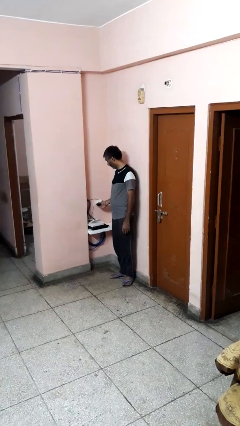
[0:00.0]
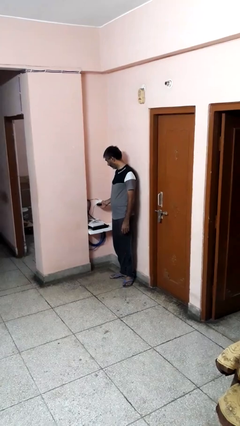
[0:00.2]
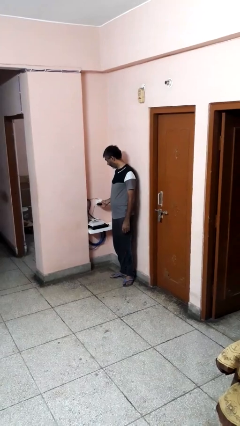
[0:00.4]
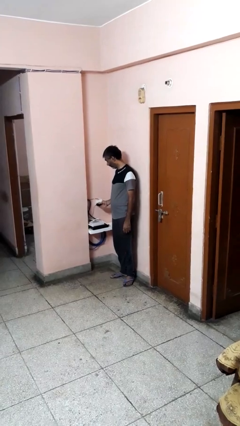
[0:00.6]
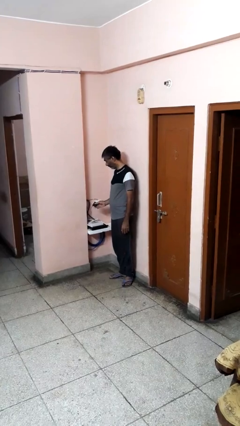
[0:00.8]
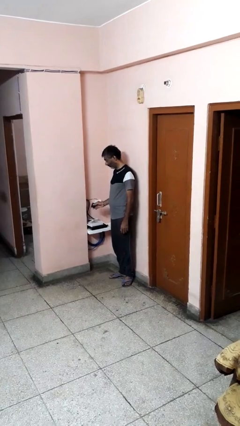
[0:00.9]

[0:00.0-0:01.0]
person unplugs from electrical socket

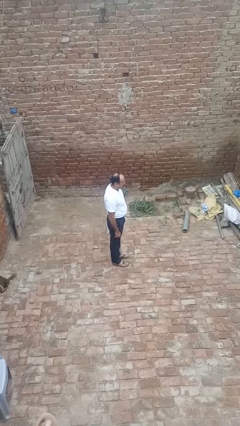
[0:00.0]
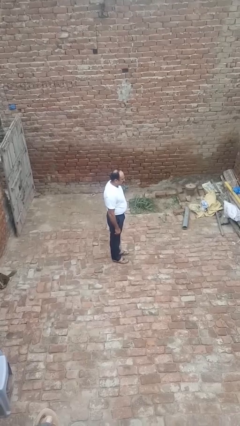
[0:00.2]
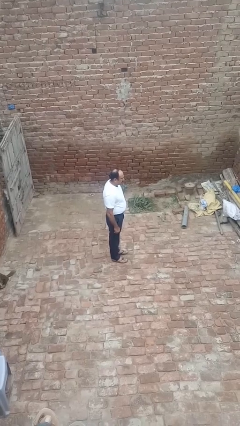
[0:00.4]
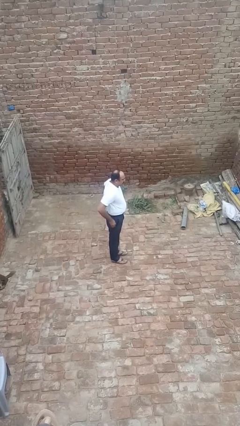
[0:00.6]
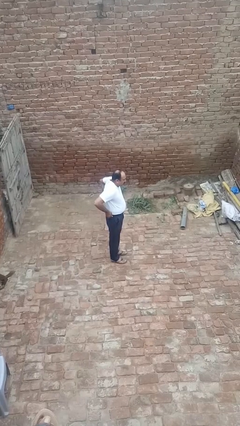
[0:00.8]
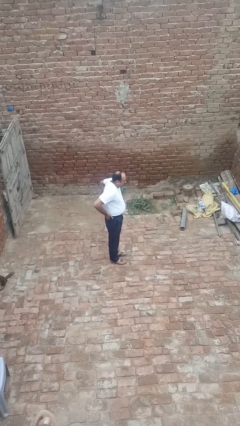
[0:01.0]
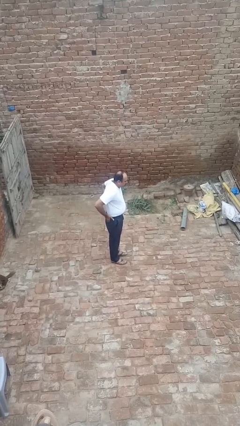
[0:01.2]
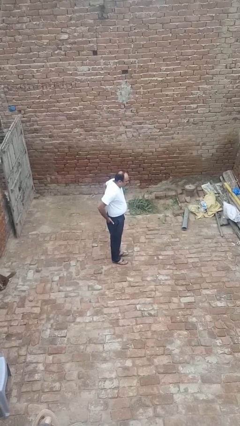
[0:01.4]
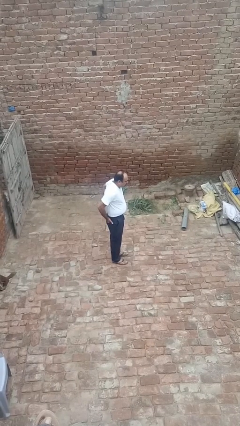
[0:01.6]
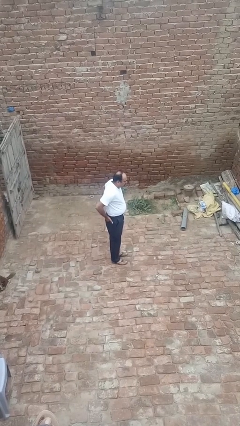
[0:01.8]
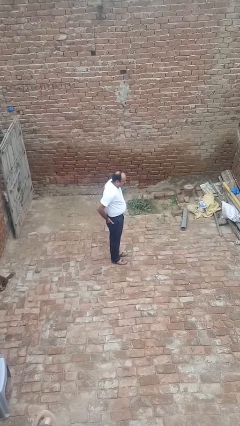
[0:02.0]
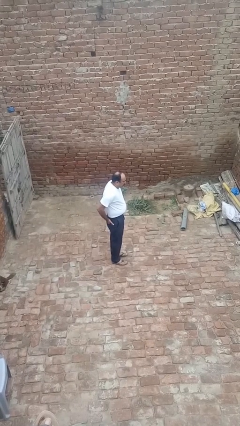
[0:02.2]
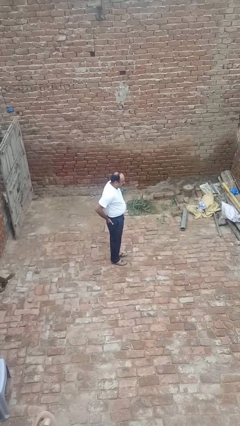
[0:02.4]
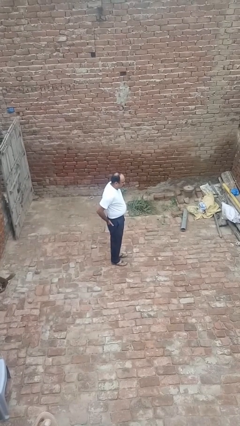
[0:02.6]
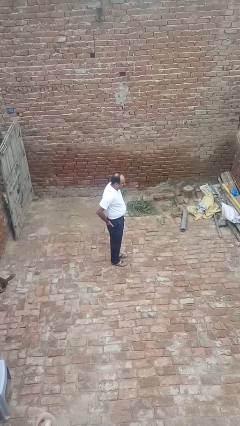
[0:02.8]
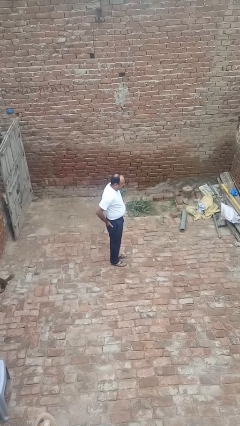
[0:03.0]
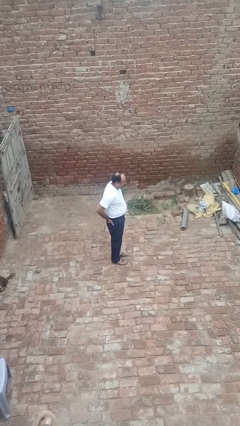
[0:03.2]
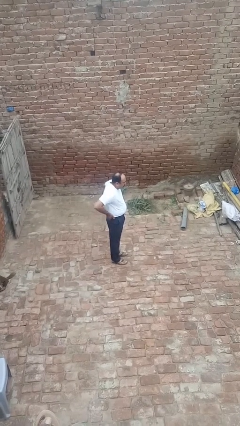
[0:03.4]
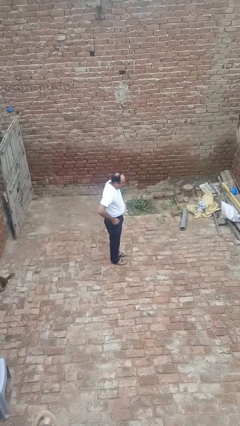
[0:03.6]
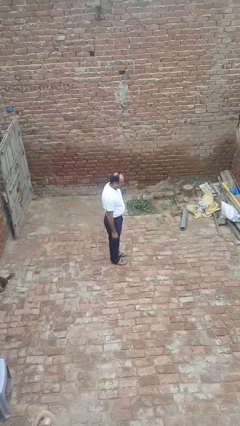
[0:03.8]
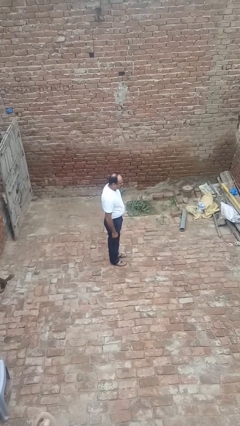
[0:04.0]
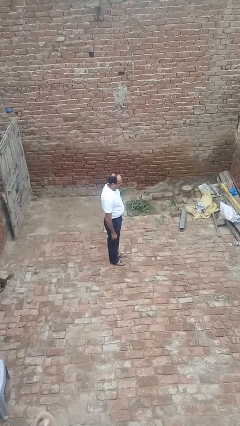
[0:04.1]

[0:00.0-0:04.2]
person puts hands in back pockets

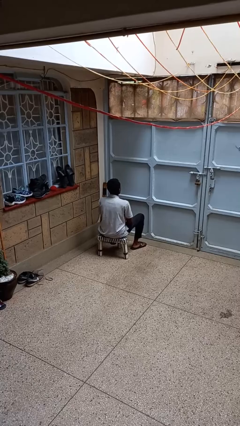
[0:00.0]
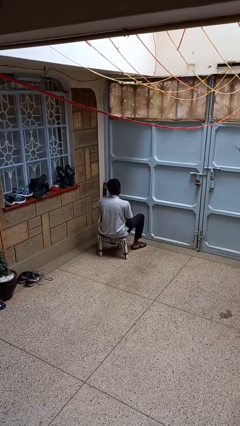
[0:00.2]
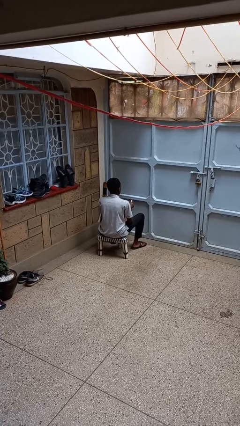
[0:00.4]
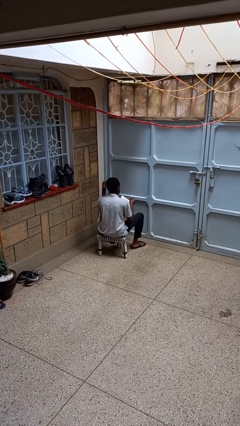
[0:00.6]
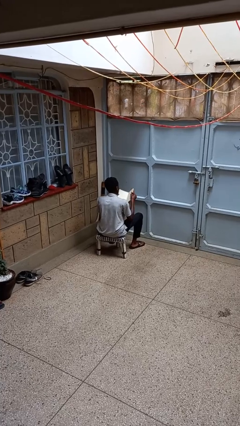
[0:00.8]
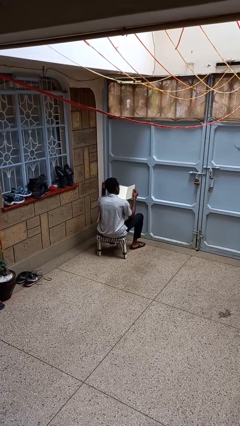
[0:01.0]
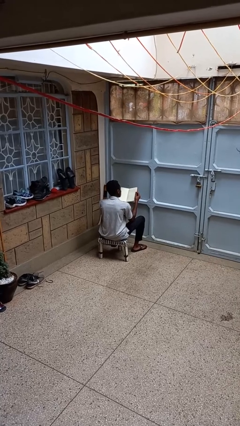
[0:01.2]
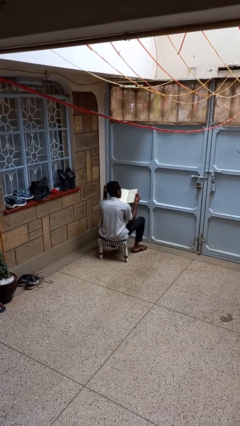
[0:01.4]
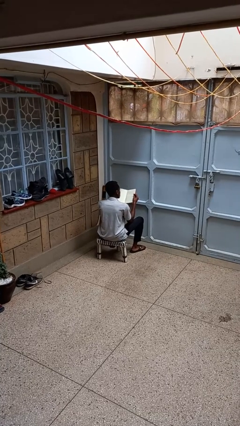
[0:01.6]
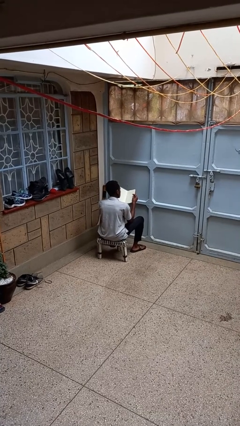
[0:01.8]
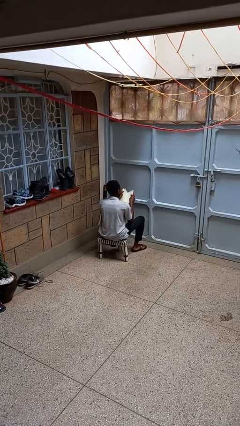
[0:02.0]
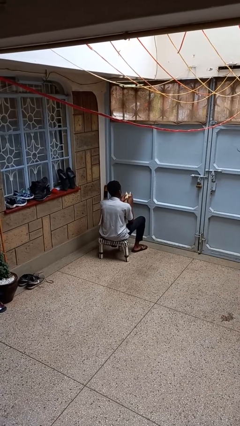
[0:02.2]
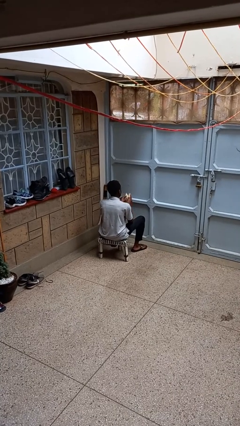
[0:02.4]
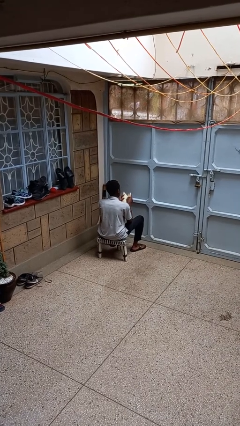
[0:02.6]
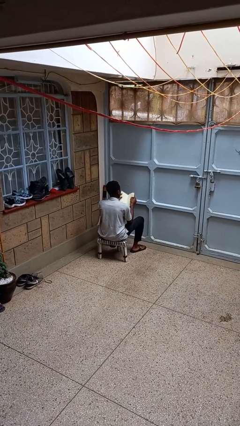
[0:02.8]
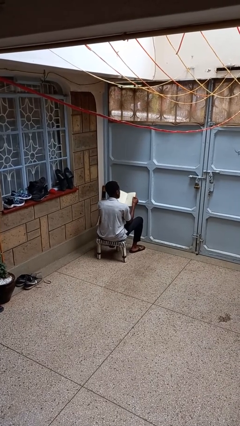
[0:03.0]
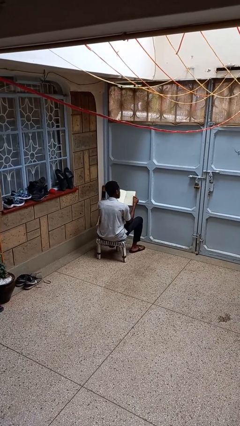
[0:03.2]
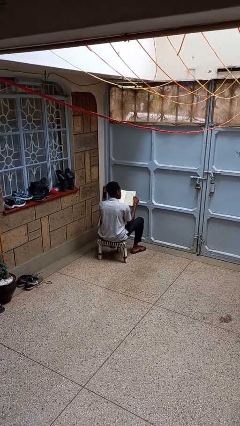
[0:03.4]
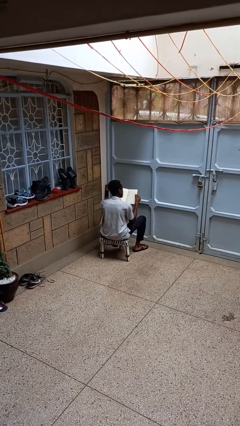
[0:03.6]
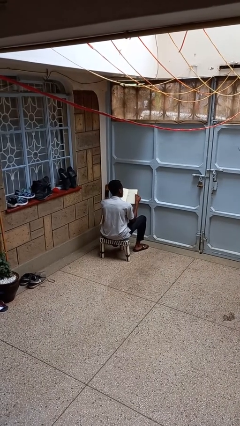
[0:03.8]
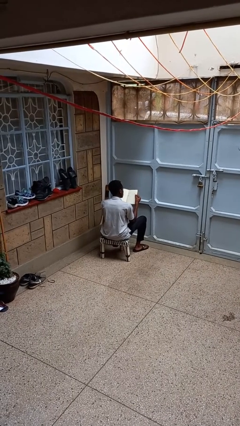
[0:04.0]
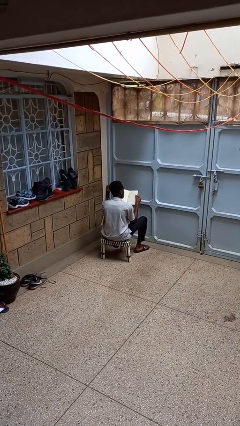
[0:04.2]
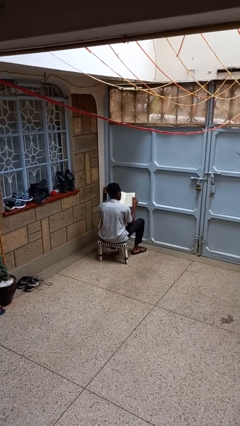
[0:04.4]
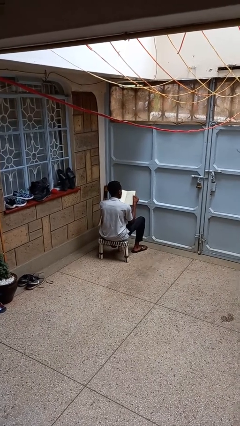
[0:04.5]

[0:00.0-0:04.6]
person reads book

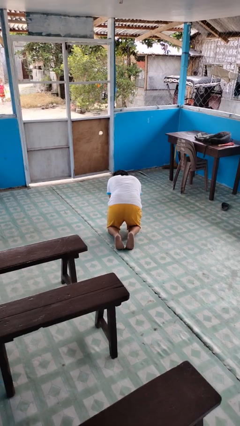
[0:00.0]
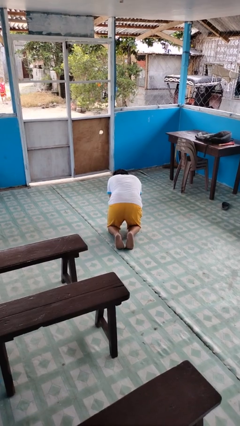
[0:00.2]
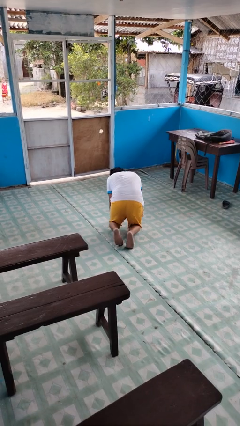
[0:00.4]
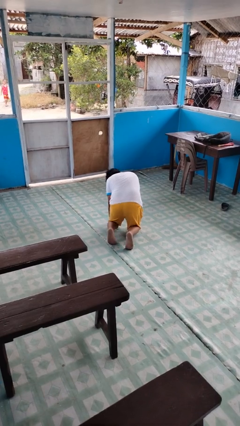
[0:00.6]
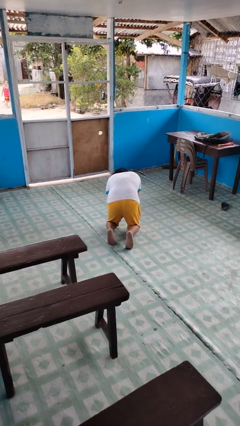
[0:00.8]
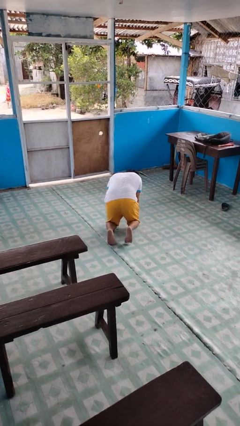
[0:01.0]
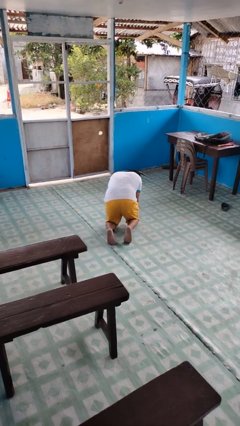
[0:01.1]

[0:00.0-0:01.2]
person crawls

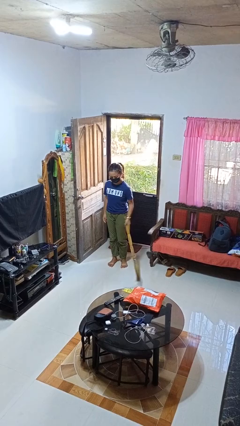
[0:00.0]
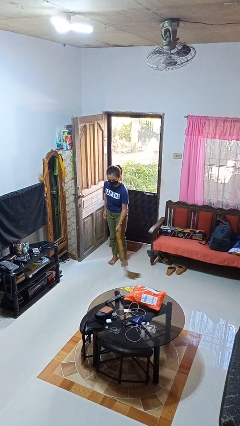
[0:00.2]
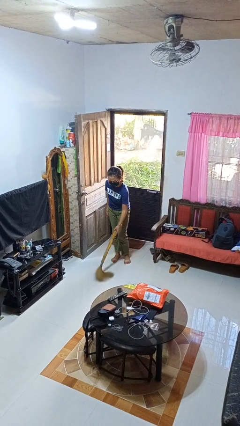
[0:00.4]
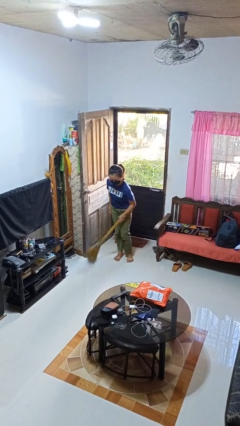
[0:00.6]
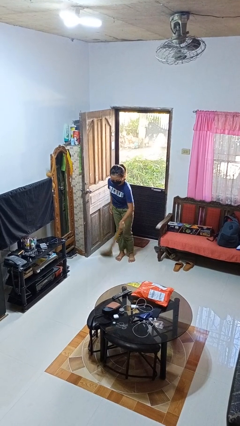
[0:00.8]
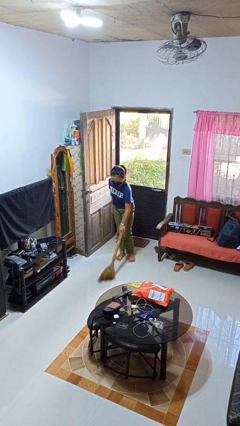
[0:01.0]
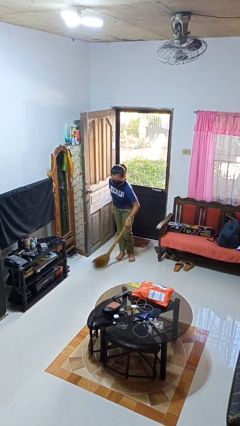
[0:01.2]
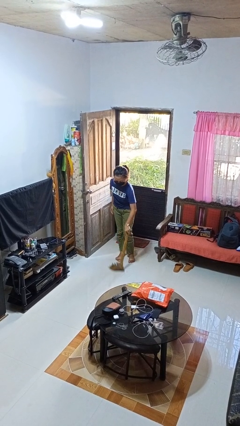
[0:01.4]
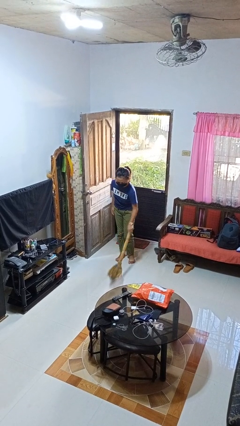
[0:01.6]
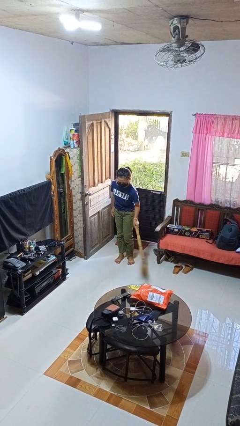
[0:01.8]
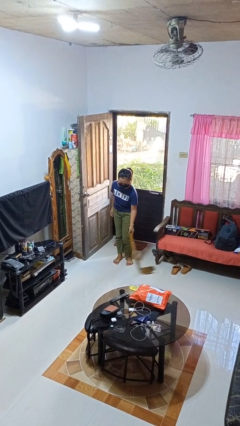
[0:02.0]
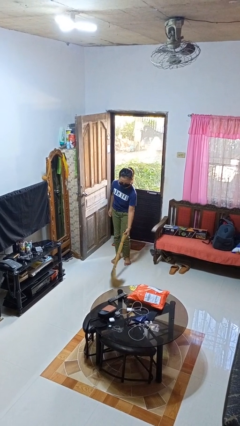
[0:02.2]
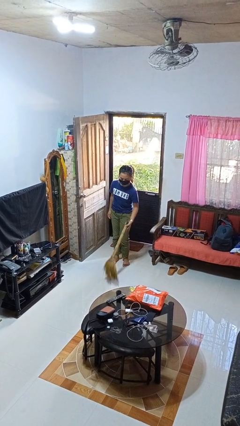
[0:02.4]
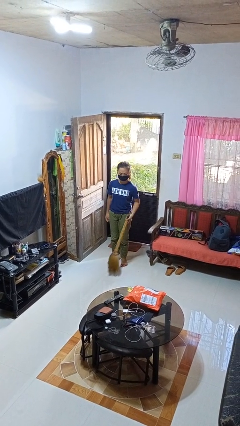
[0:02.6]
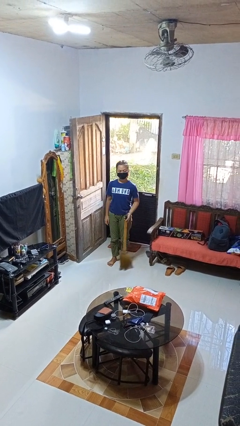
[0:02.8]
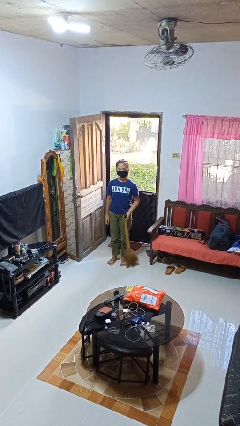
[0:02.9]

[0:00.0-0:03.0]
person sweeps floor

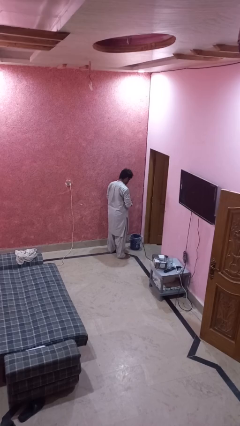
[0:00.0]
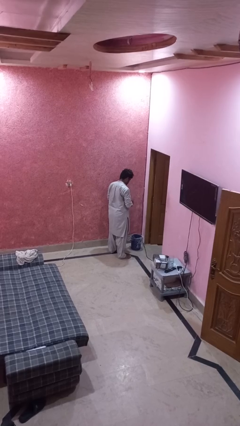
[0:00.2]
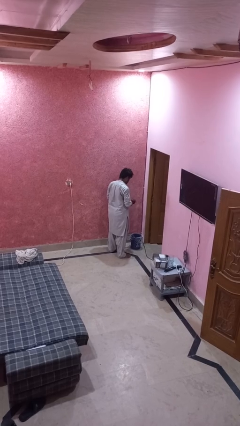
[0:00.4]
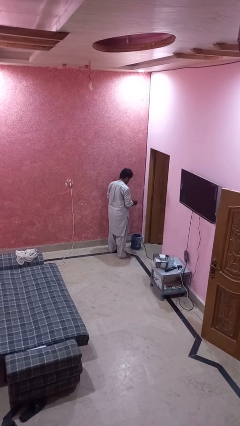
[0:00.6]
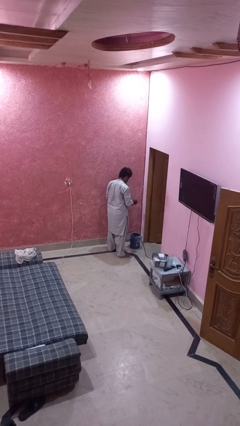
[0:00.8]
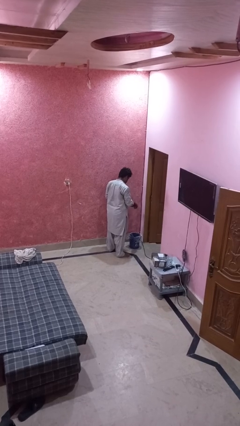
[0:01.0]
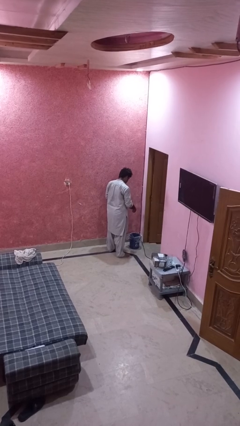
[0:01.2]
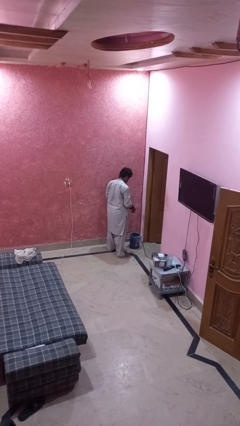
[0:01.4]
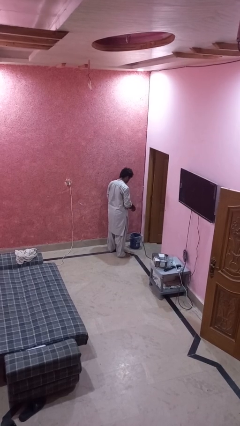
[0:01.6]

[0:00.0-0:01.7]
person discards trash

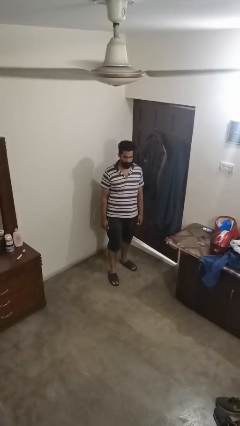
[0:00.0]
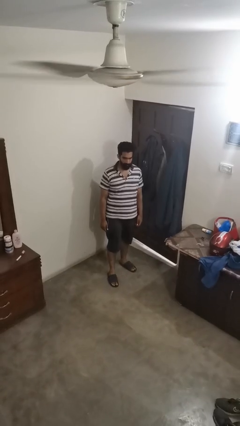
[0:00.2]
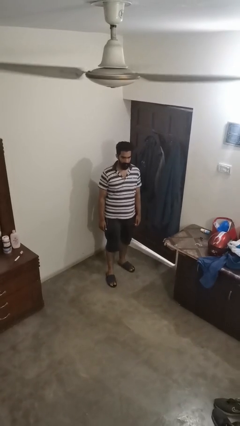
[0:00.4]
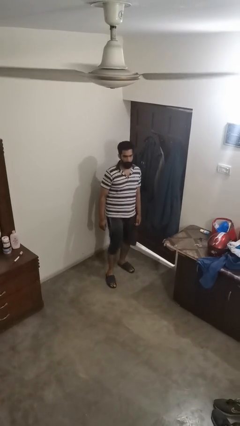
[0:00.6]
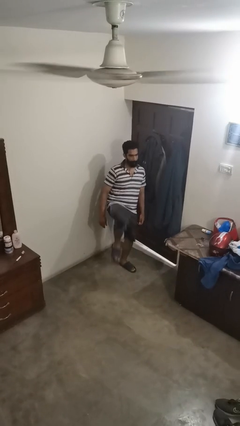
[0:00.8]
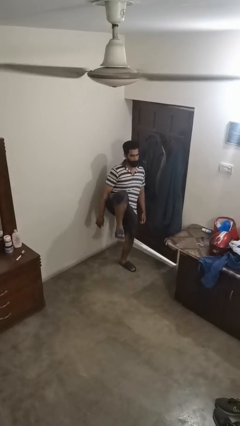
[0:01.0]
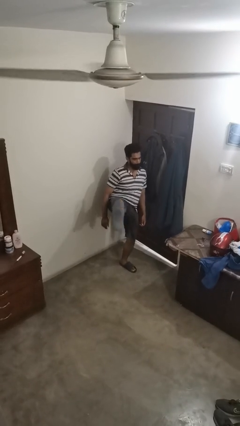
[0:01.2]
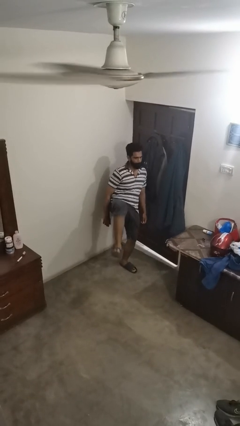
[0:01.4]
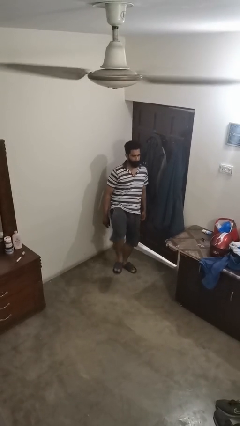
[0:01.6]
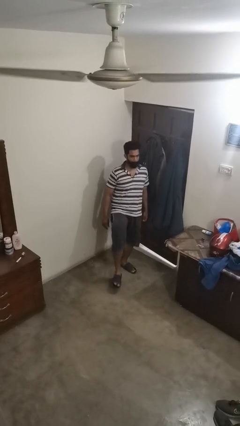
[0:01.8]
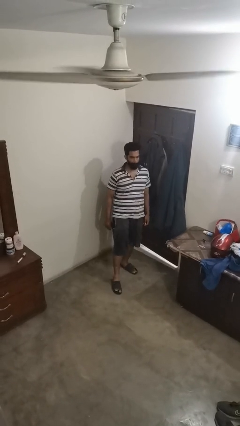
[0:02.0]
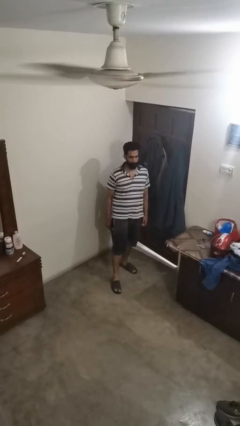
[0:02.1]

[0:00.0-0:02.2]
person karate kicks
